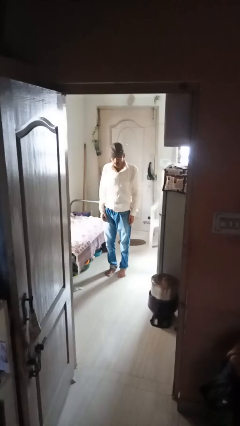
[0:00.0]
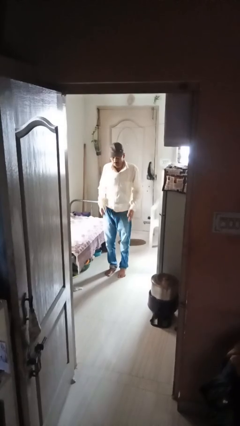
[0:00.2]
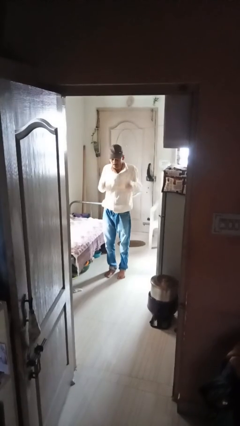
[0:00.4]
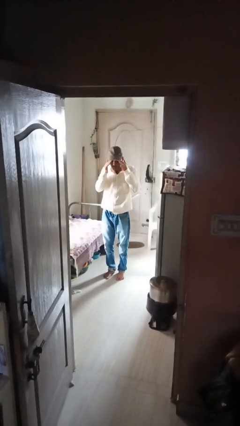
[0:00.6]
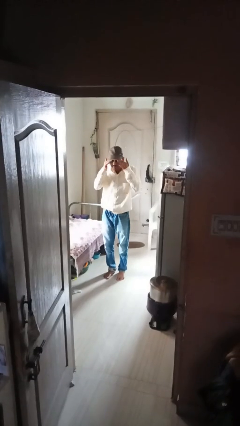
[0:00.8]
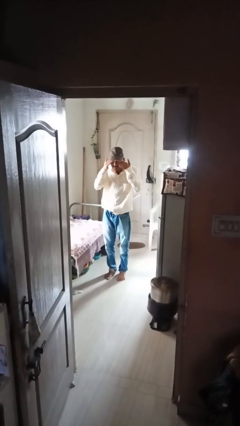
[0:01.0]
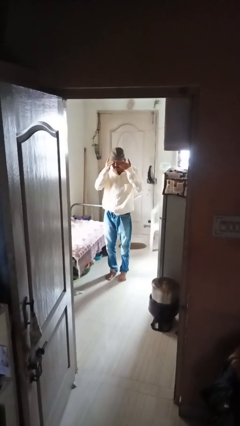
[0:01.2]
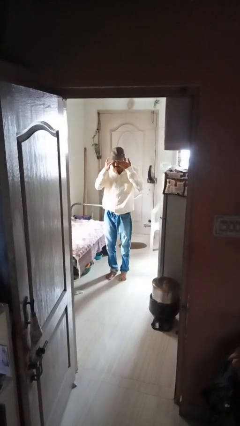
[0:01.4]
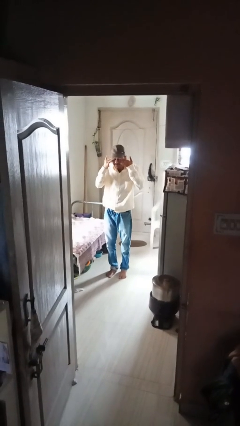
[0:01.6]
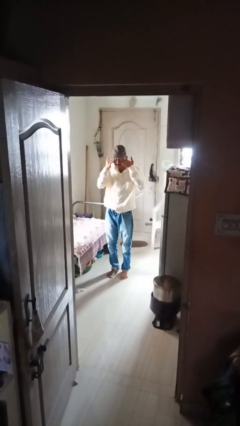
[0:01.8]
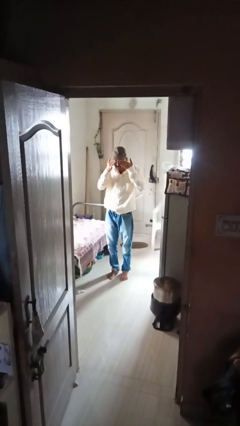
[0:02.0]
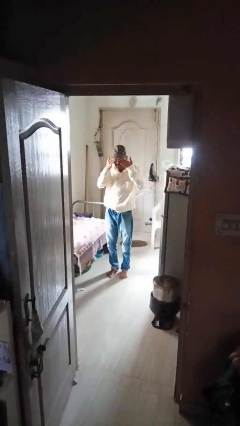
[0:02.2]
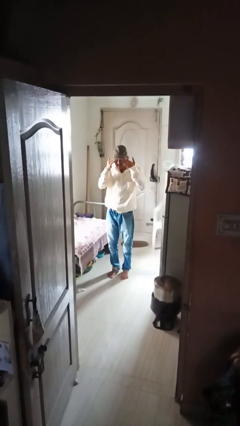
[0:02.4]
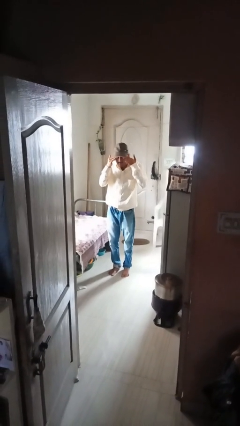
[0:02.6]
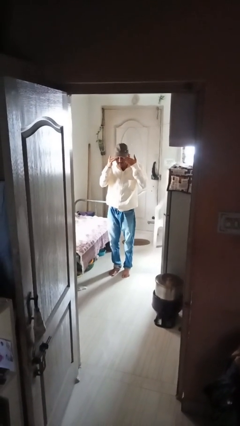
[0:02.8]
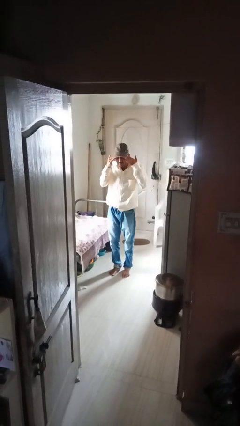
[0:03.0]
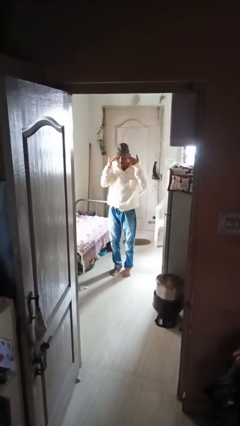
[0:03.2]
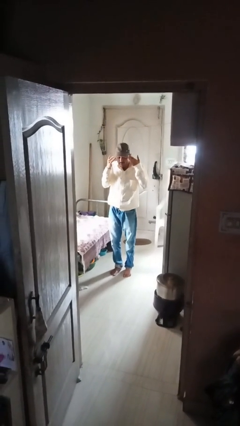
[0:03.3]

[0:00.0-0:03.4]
person rubs eyes

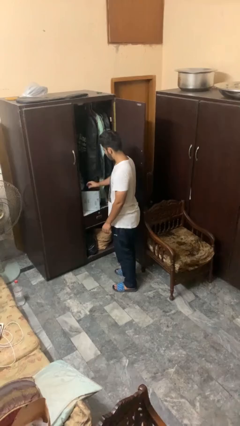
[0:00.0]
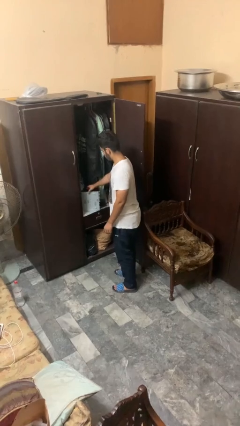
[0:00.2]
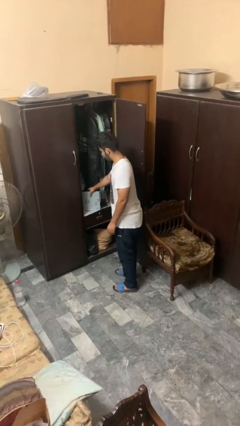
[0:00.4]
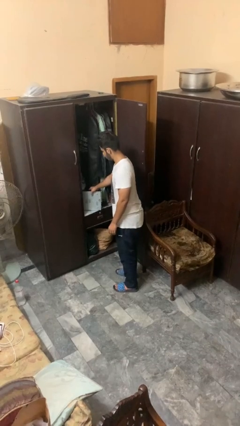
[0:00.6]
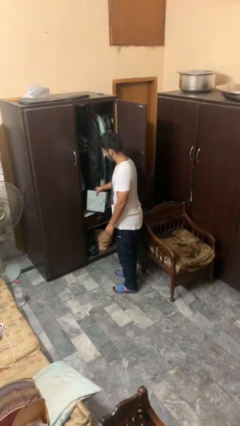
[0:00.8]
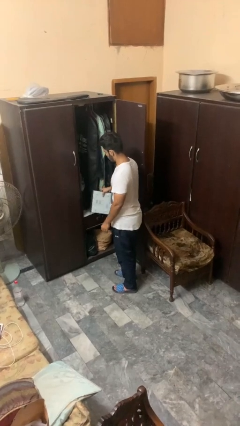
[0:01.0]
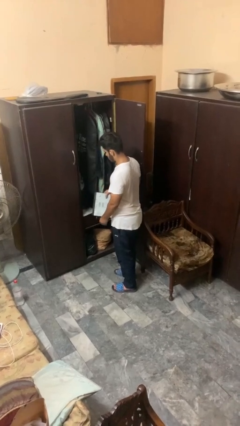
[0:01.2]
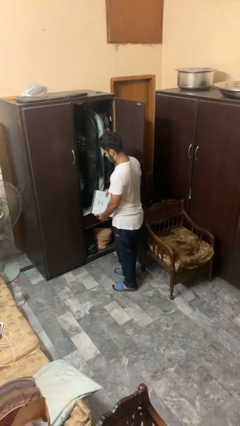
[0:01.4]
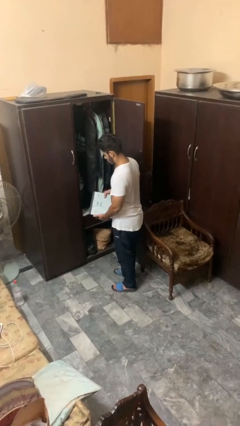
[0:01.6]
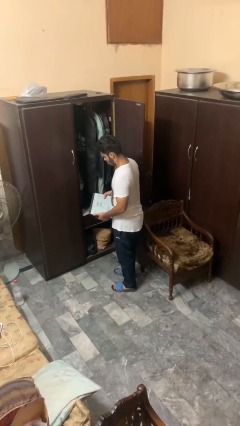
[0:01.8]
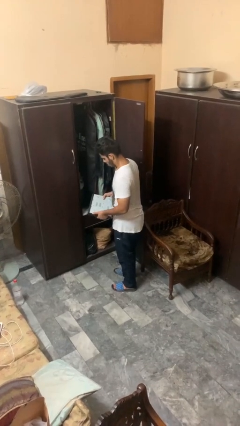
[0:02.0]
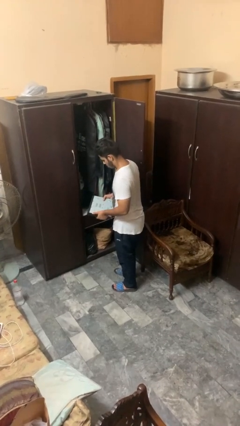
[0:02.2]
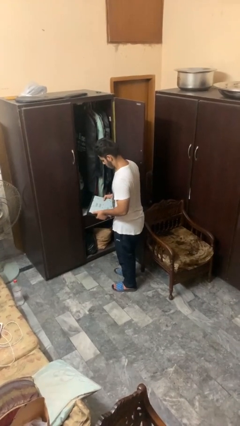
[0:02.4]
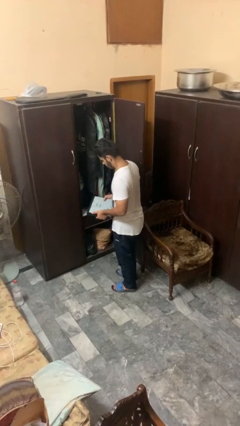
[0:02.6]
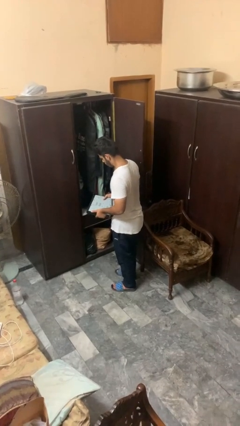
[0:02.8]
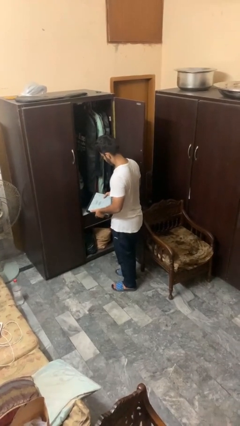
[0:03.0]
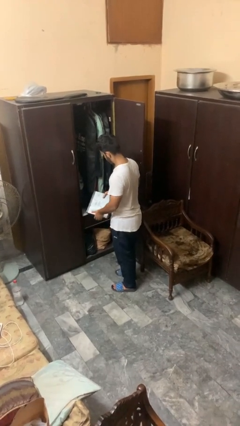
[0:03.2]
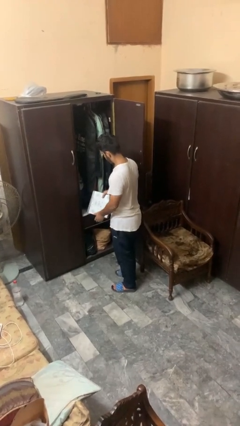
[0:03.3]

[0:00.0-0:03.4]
person picks up object from countertop

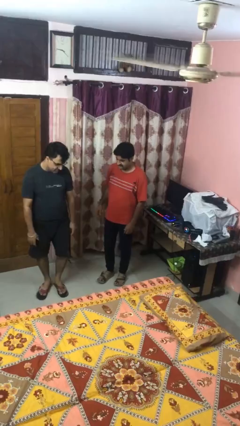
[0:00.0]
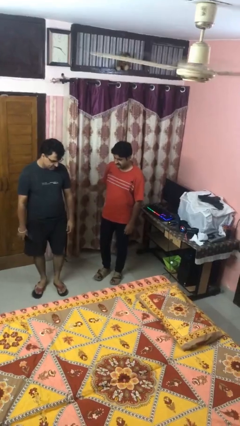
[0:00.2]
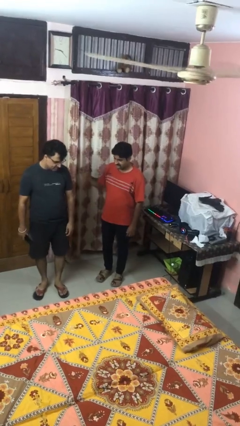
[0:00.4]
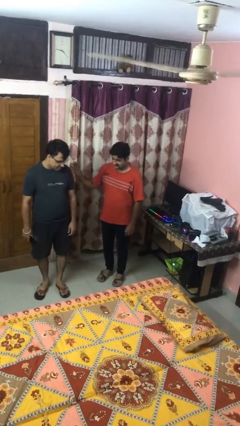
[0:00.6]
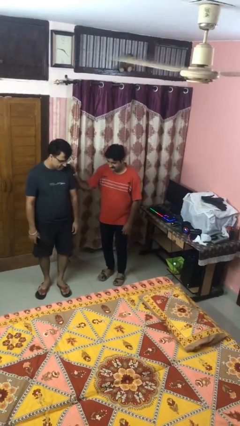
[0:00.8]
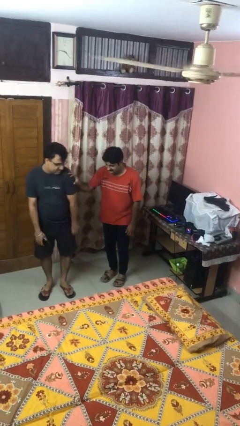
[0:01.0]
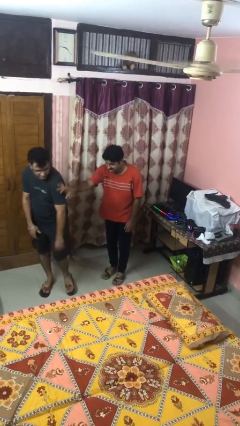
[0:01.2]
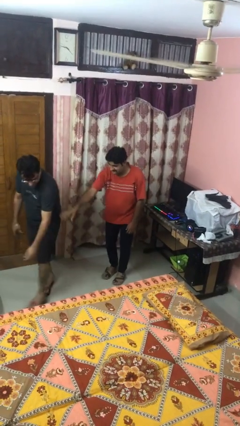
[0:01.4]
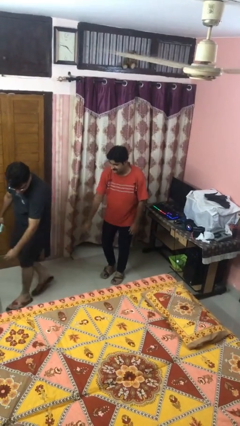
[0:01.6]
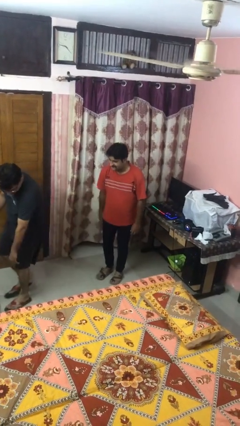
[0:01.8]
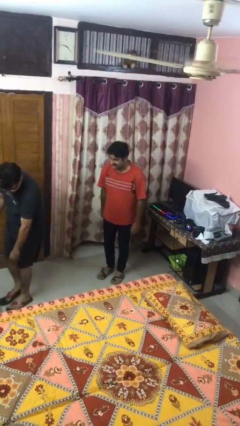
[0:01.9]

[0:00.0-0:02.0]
person shoves person

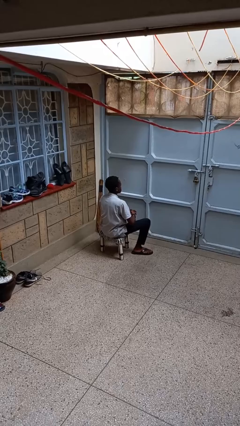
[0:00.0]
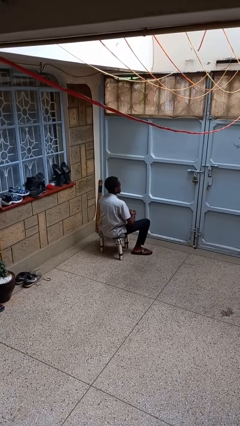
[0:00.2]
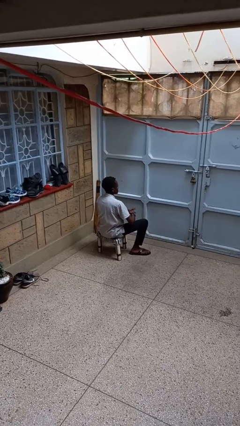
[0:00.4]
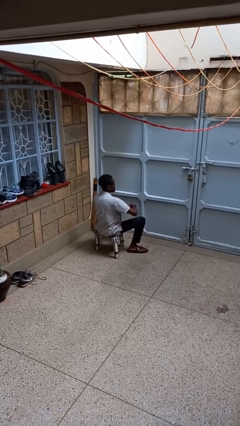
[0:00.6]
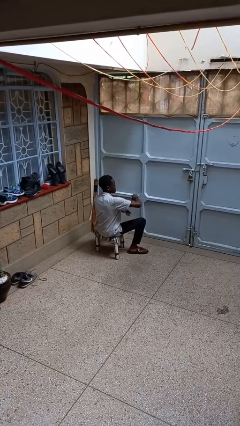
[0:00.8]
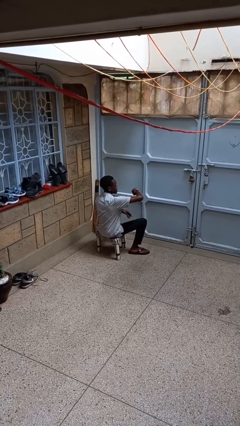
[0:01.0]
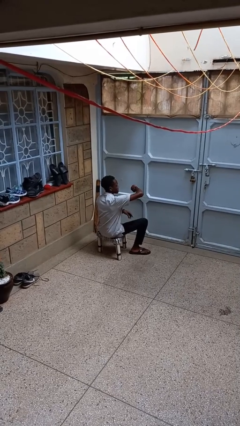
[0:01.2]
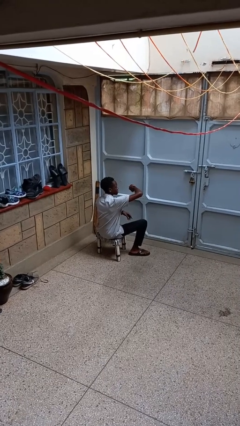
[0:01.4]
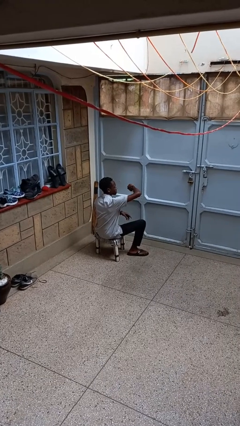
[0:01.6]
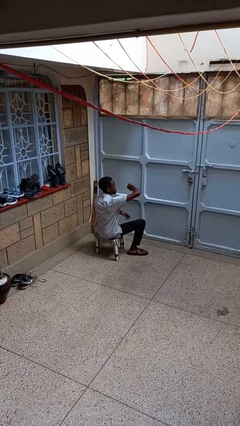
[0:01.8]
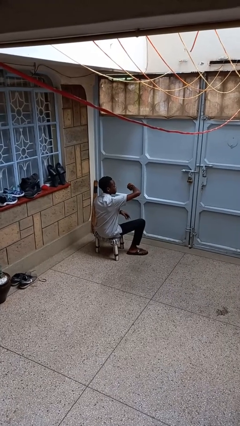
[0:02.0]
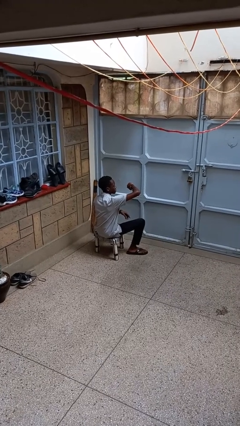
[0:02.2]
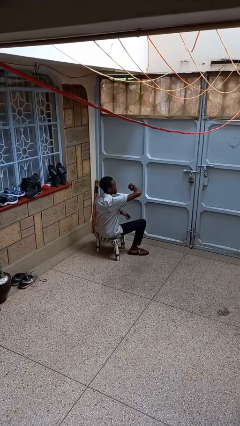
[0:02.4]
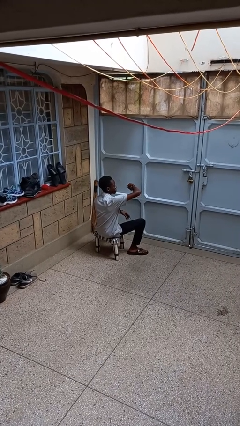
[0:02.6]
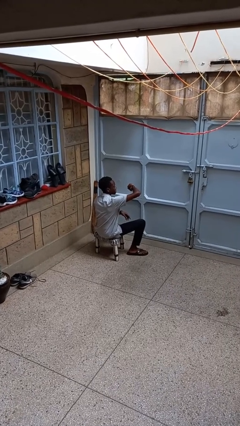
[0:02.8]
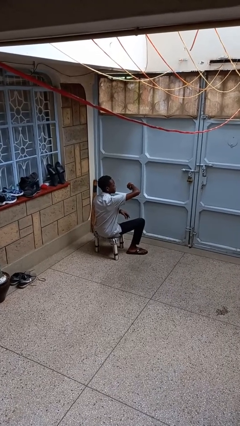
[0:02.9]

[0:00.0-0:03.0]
person looks at wristwatch

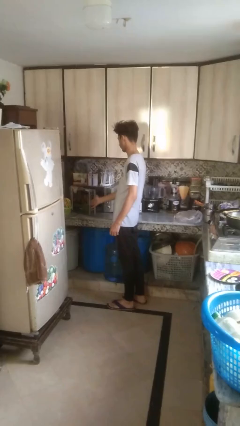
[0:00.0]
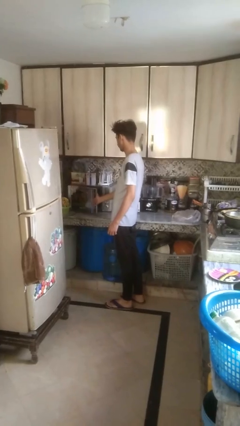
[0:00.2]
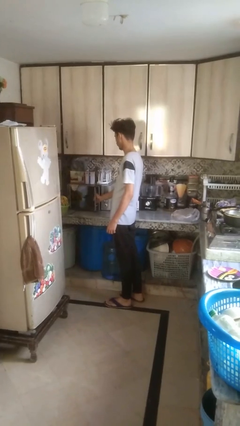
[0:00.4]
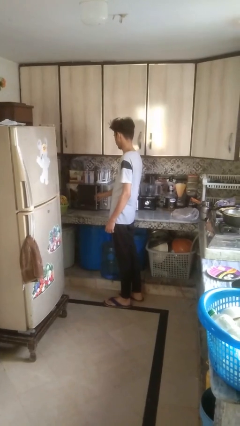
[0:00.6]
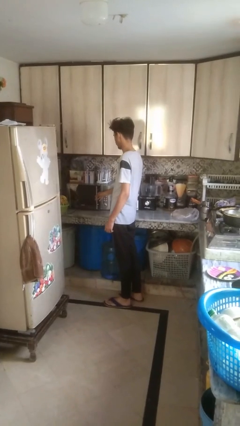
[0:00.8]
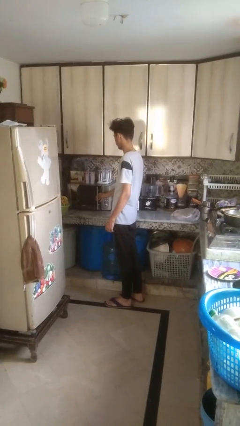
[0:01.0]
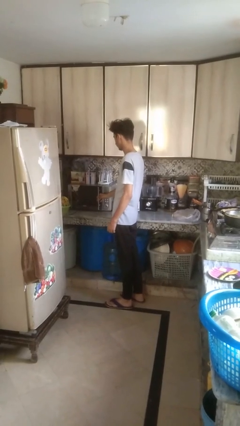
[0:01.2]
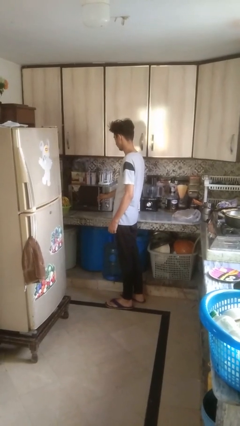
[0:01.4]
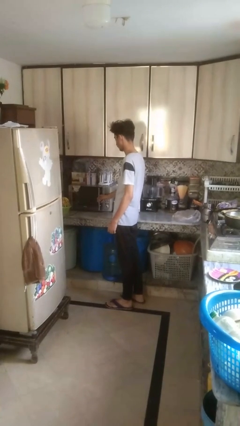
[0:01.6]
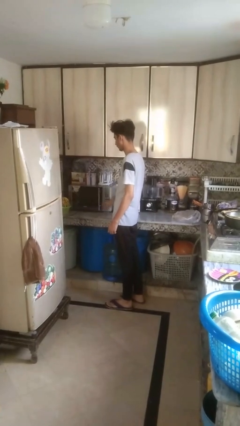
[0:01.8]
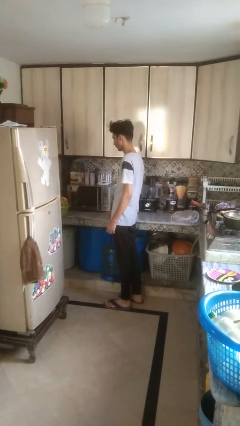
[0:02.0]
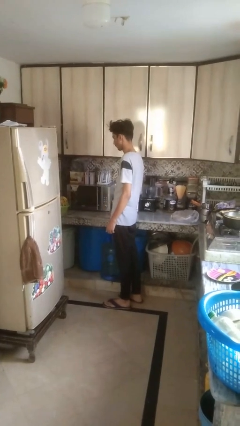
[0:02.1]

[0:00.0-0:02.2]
person closes oven door

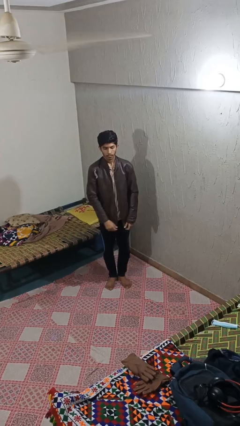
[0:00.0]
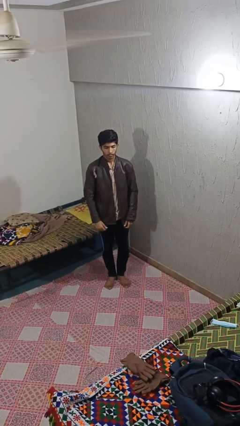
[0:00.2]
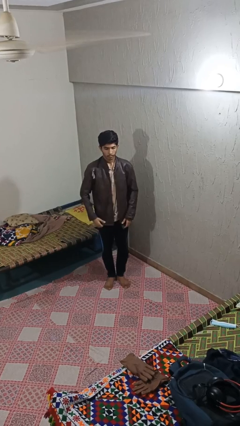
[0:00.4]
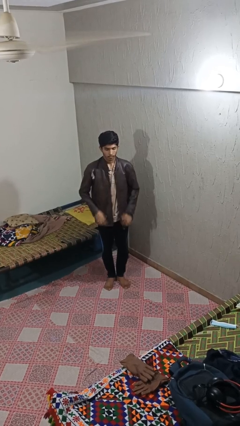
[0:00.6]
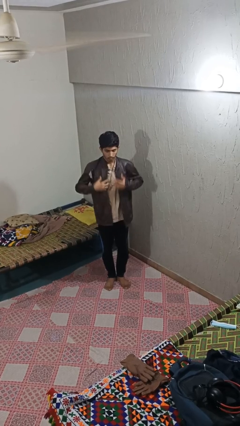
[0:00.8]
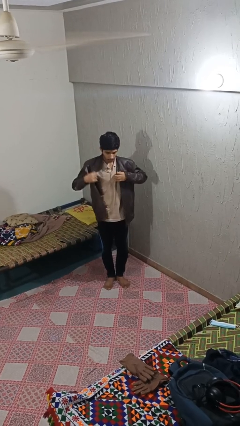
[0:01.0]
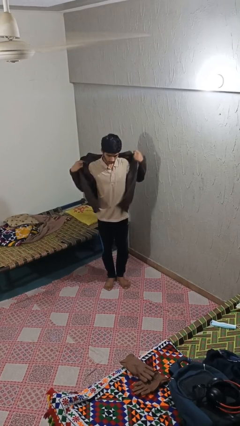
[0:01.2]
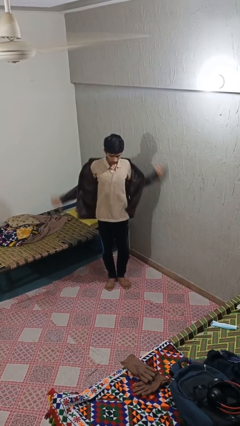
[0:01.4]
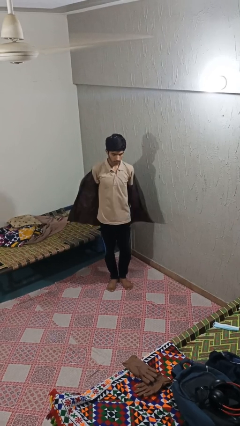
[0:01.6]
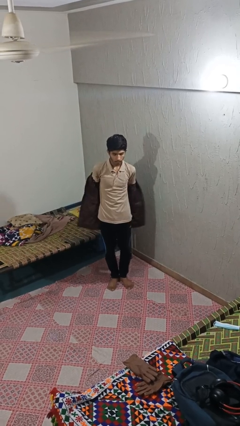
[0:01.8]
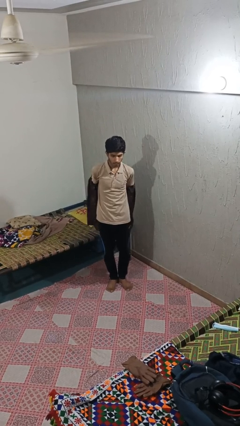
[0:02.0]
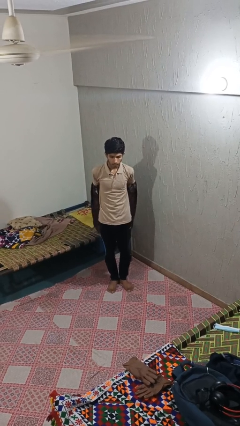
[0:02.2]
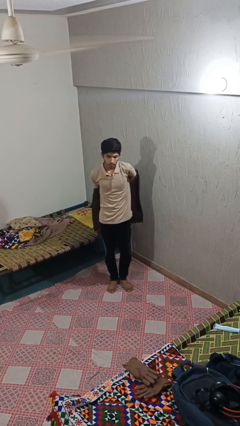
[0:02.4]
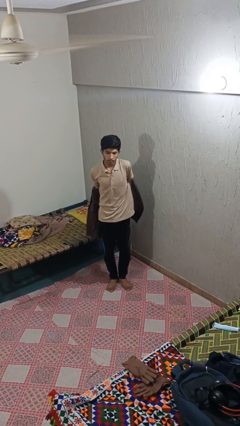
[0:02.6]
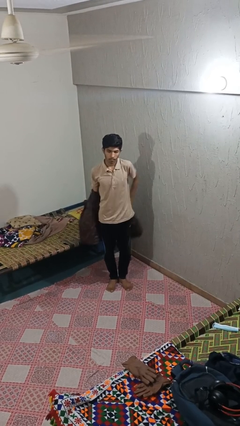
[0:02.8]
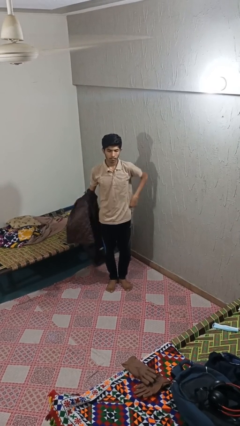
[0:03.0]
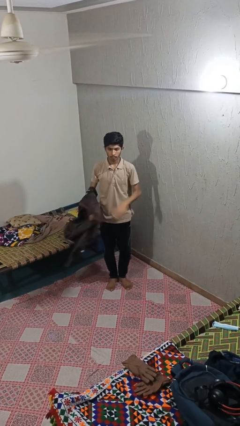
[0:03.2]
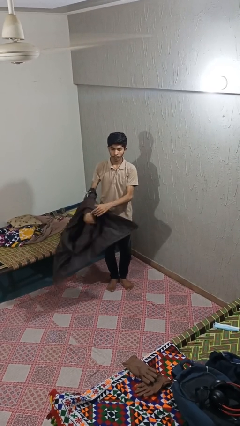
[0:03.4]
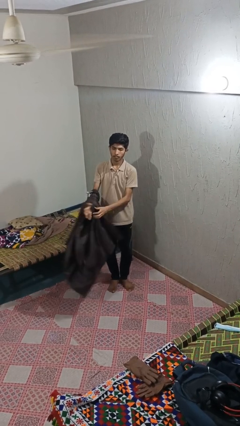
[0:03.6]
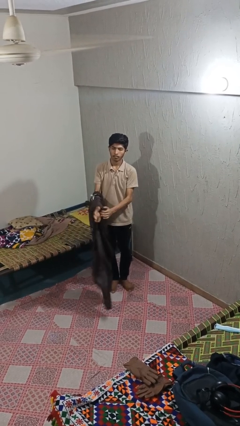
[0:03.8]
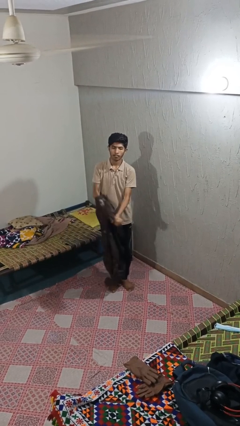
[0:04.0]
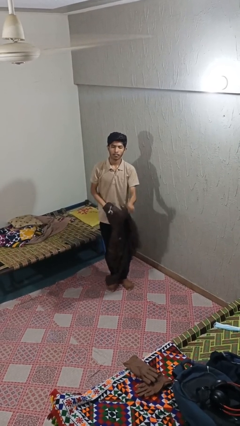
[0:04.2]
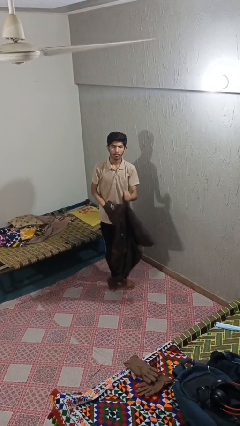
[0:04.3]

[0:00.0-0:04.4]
person takes off jacket
